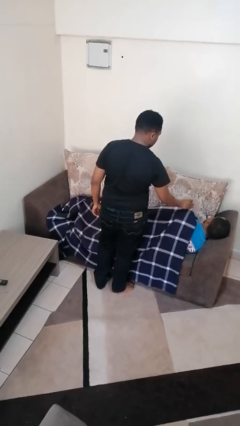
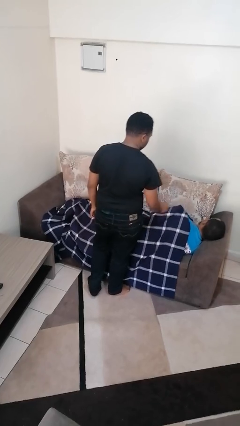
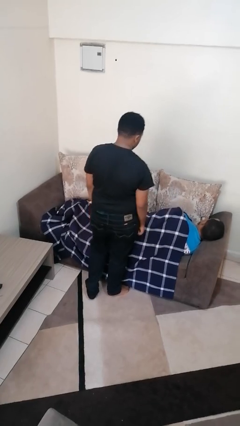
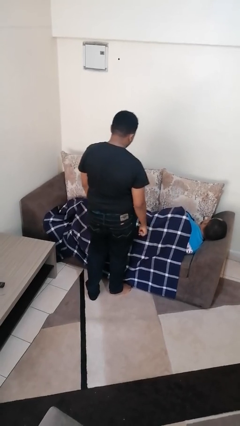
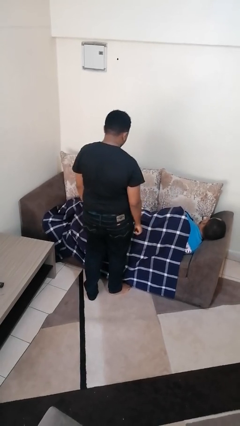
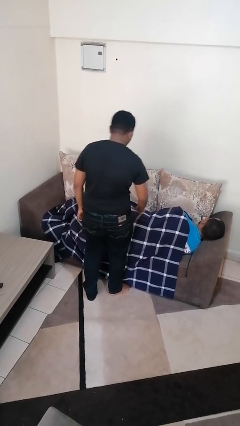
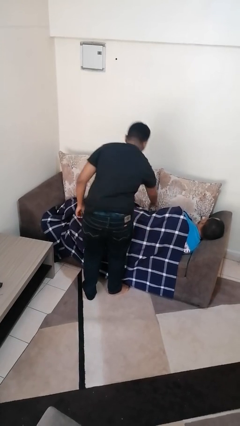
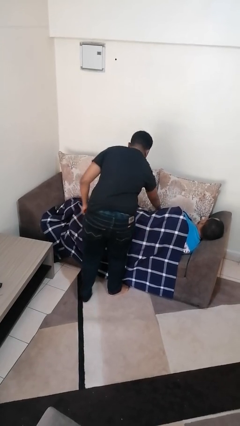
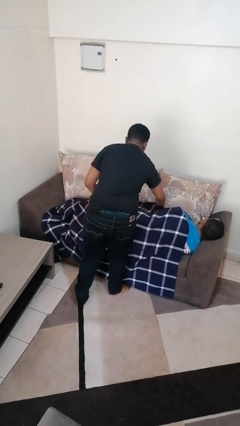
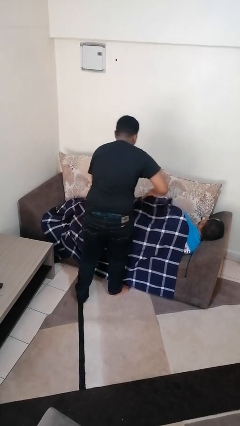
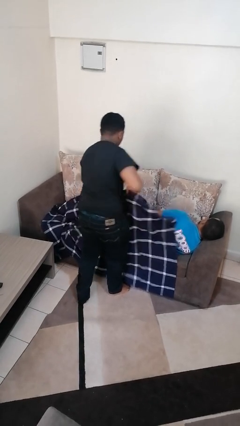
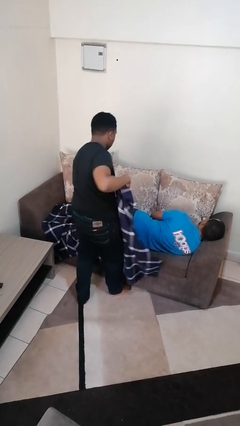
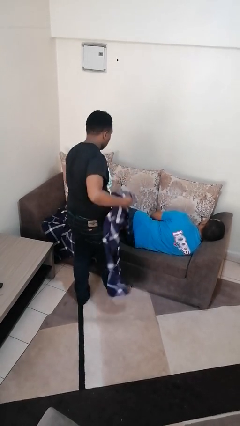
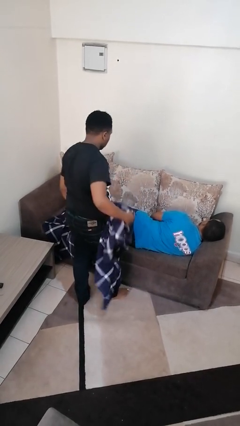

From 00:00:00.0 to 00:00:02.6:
person uncovers friend with blanket

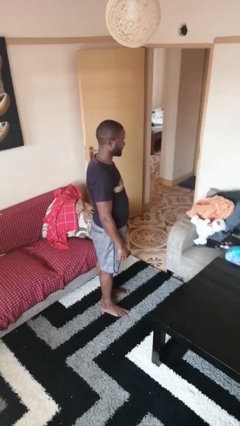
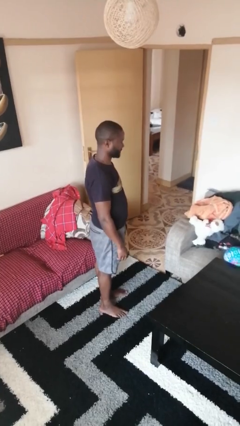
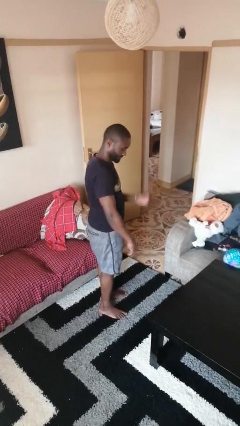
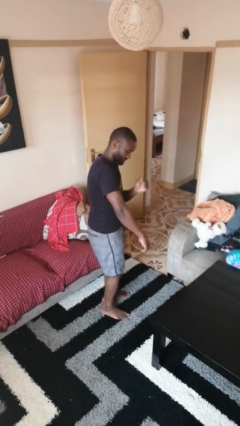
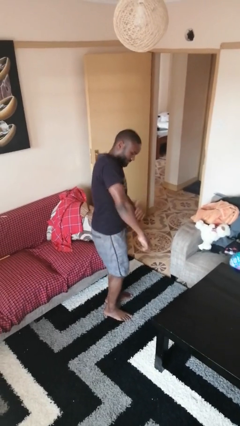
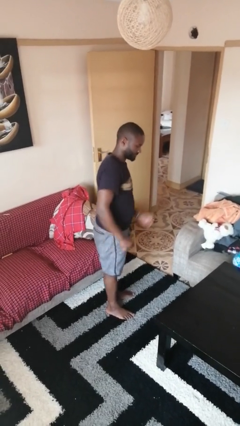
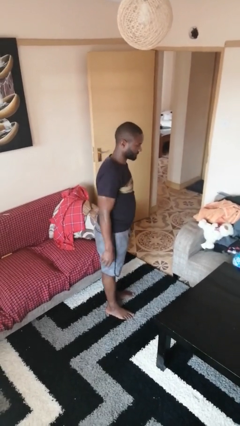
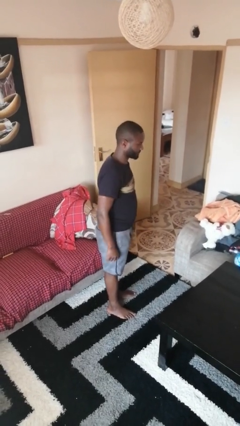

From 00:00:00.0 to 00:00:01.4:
person swats bug

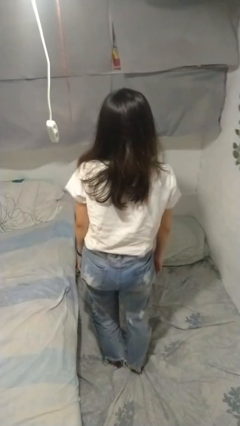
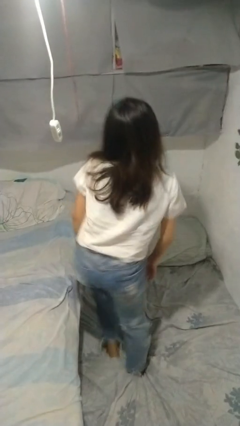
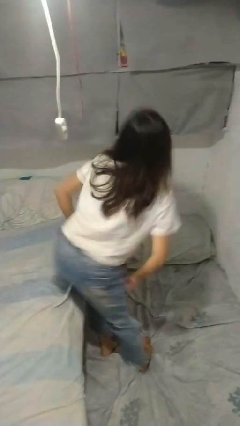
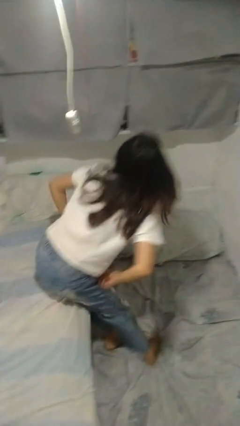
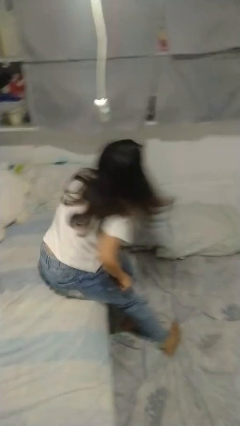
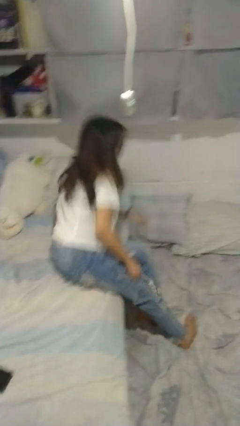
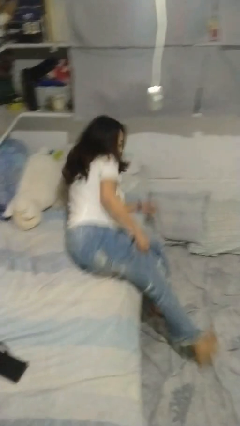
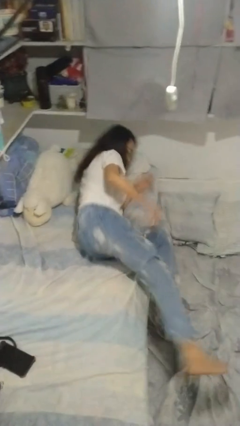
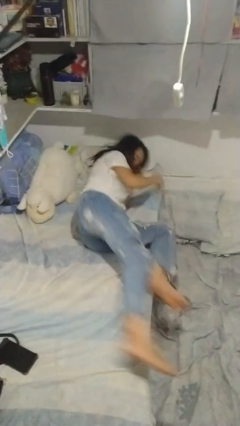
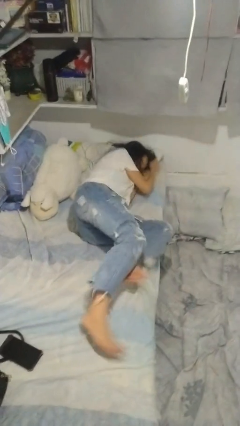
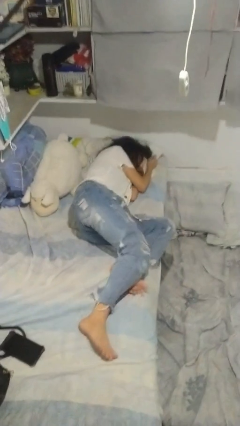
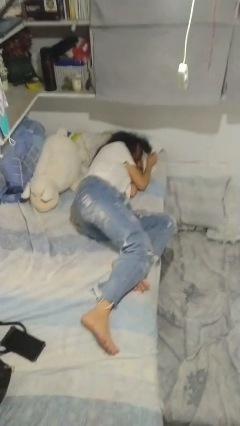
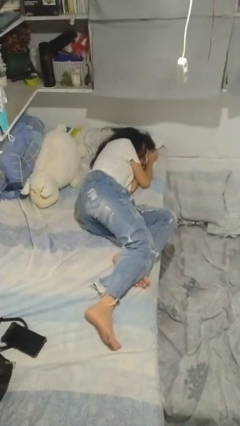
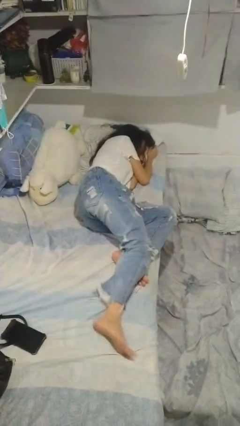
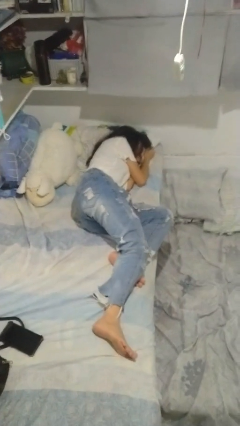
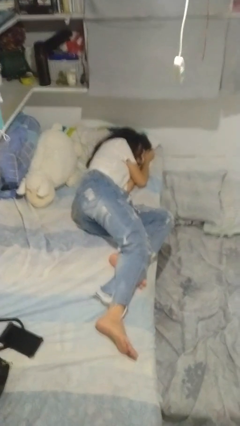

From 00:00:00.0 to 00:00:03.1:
person lies down on bed

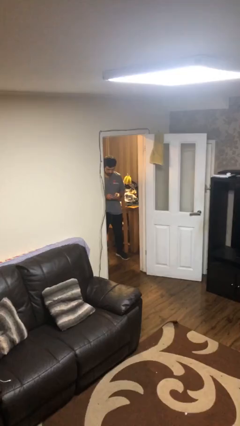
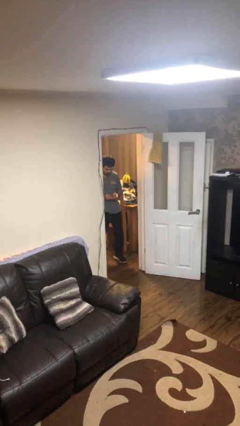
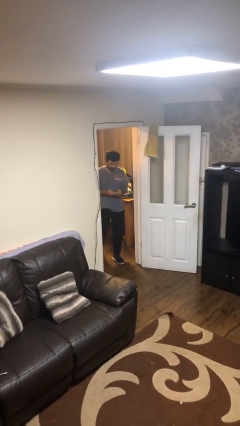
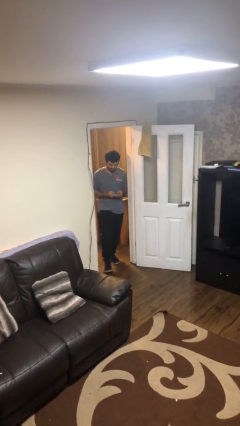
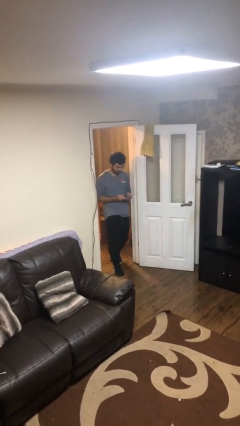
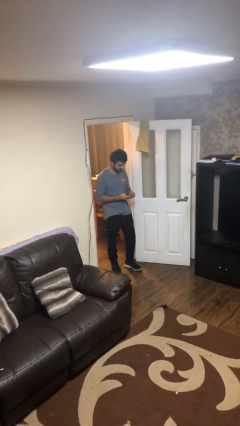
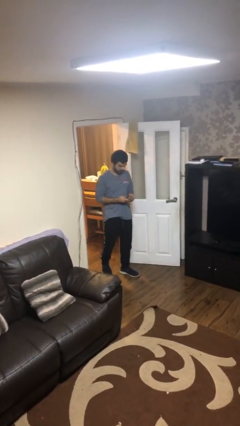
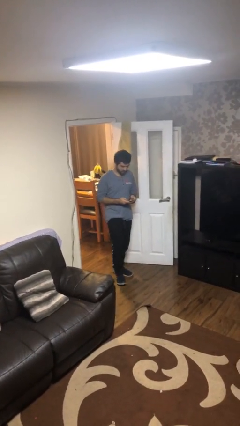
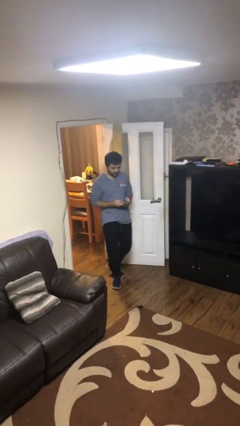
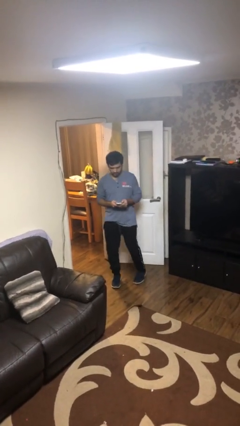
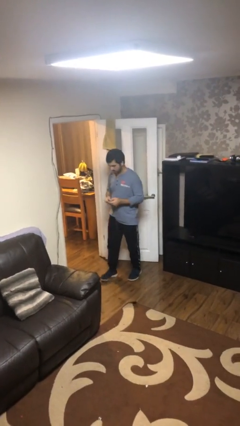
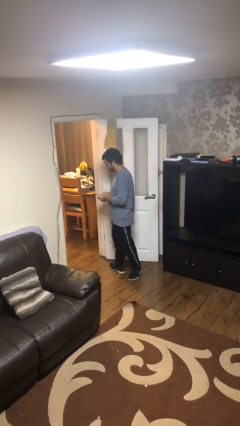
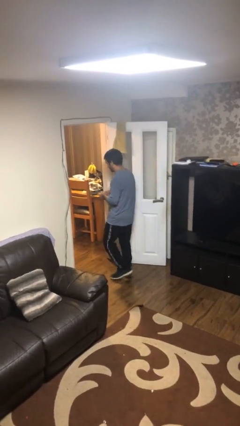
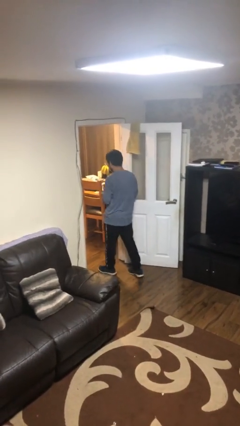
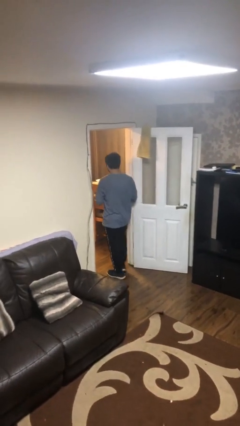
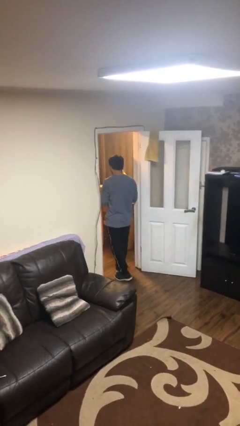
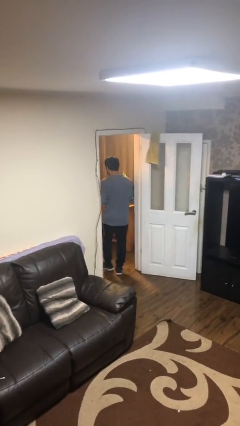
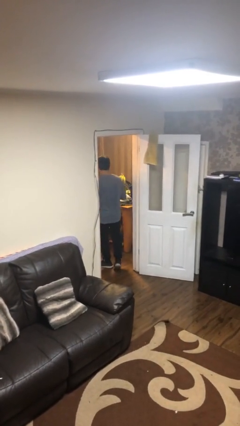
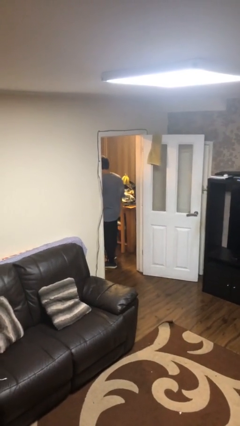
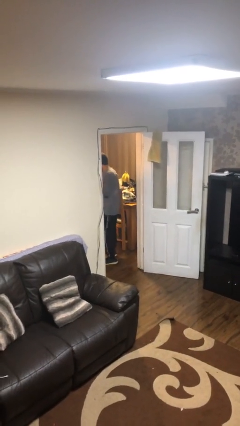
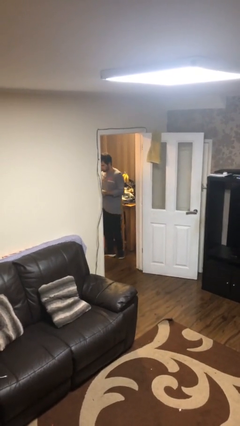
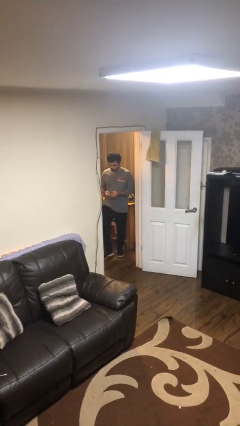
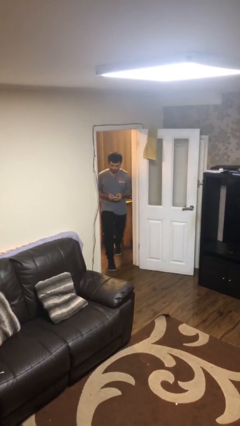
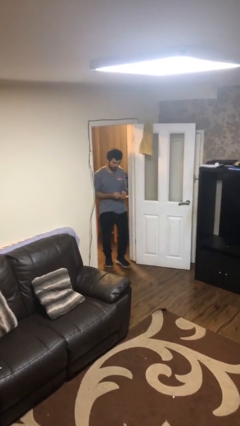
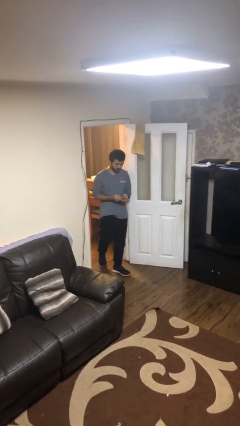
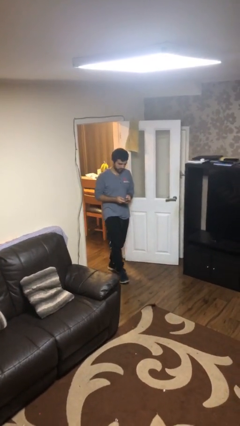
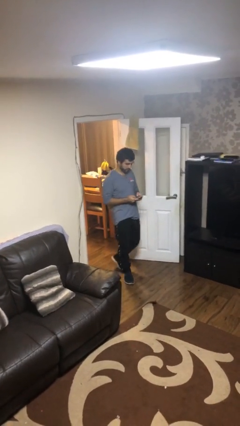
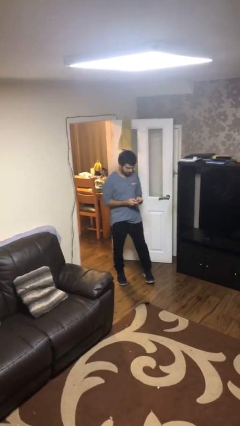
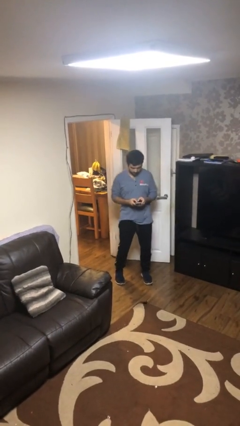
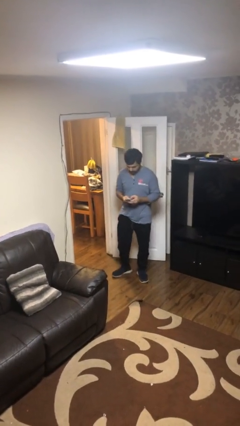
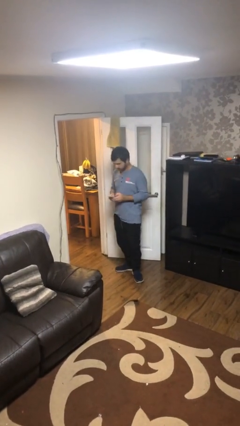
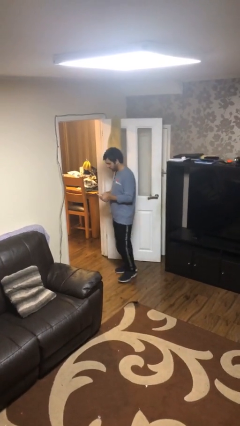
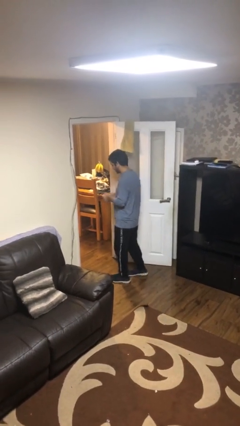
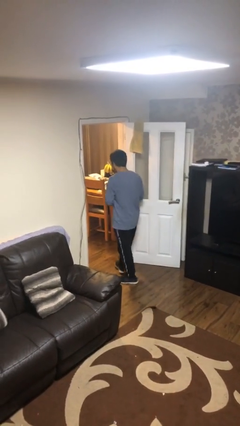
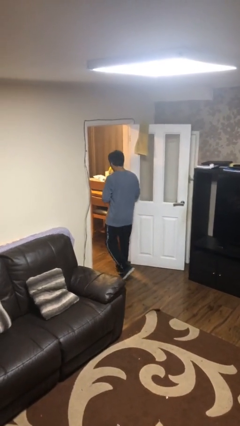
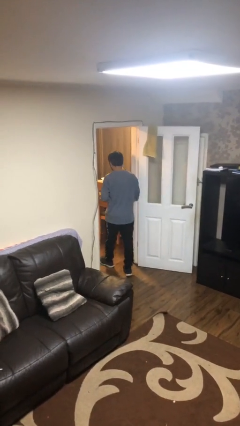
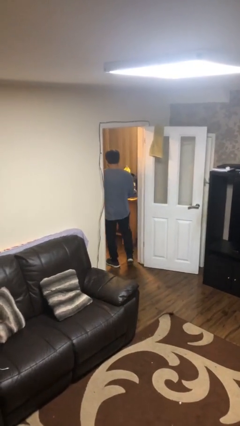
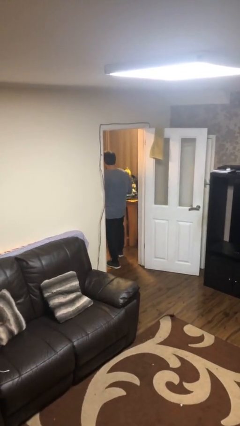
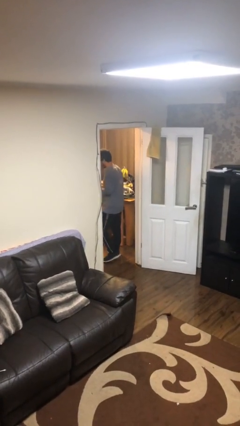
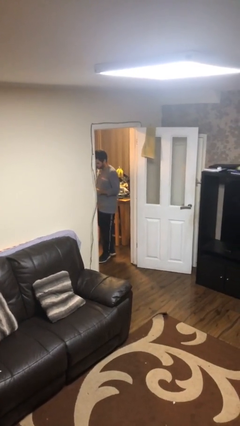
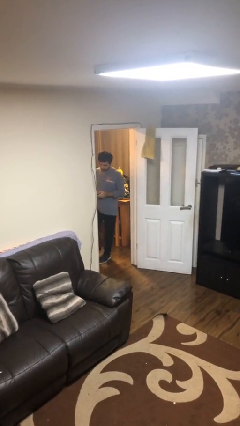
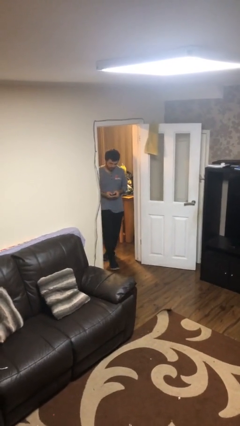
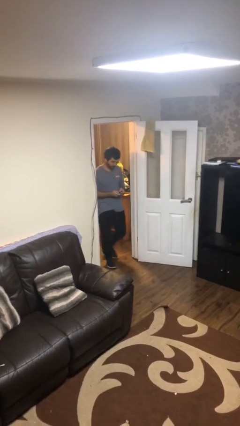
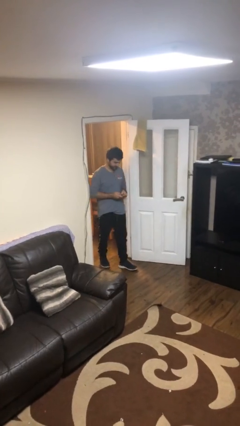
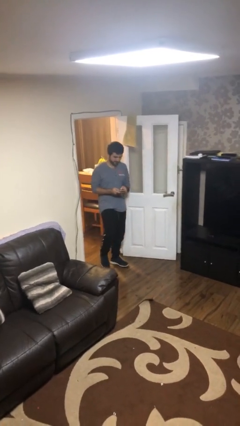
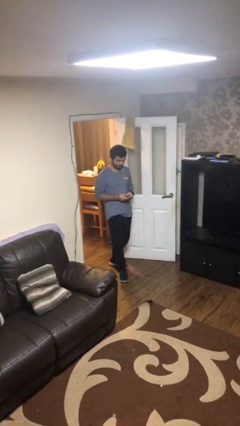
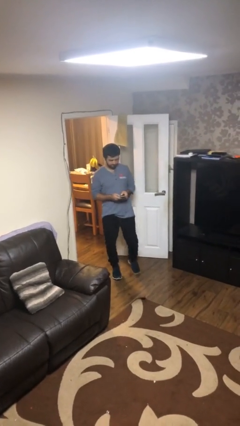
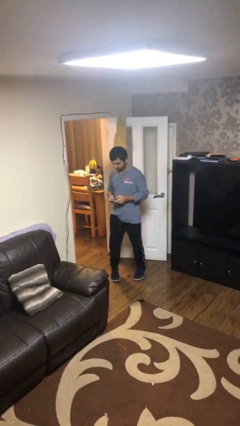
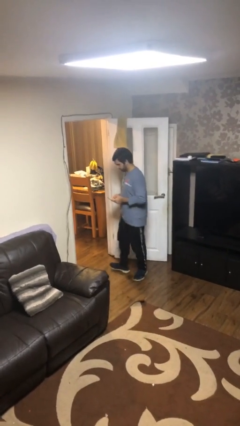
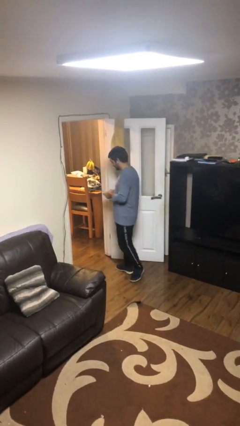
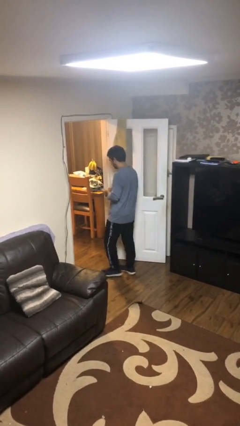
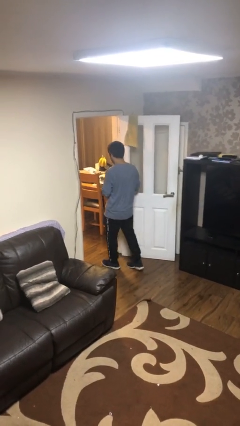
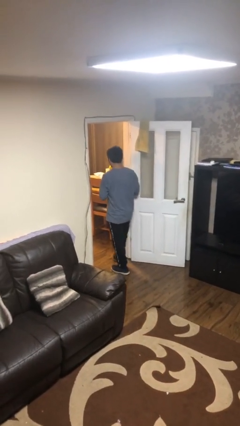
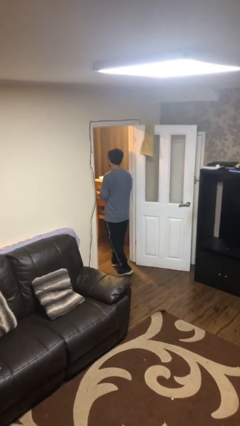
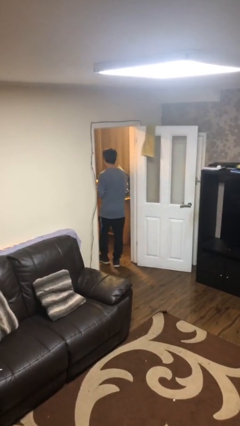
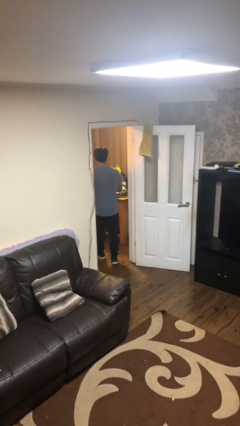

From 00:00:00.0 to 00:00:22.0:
person texts on phone
